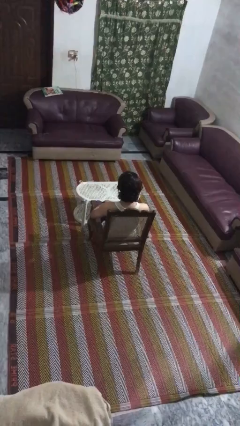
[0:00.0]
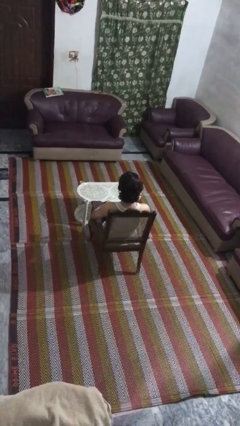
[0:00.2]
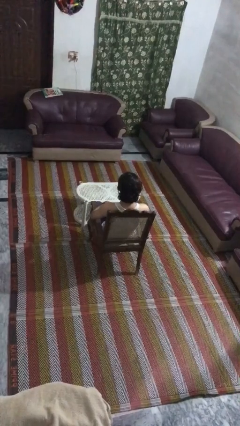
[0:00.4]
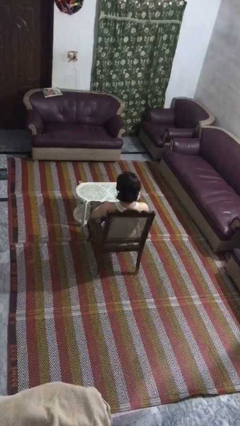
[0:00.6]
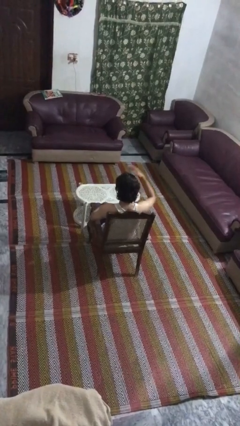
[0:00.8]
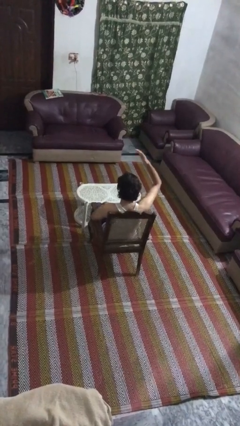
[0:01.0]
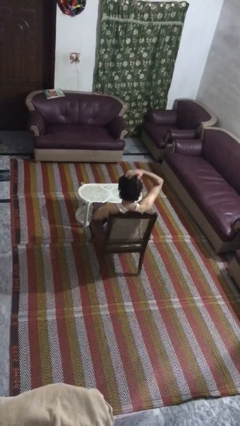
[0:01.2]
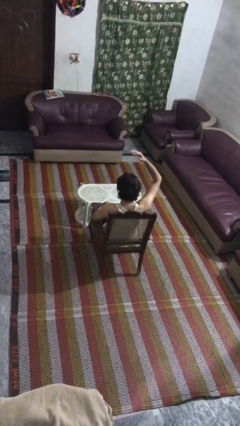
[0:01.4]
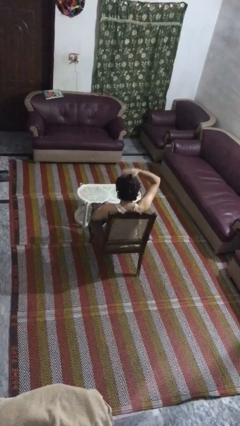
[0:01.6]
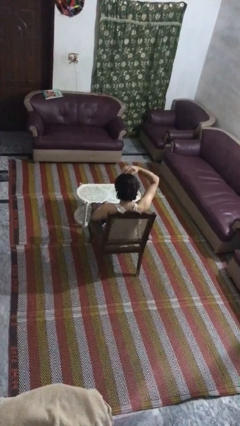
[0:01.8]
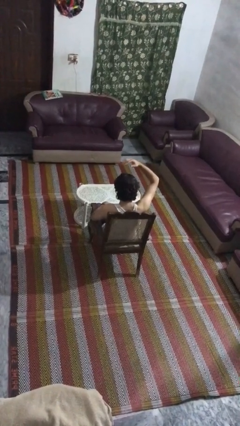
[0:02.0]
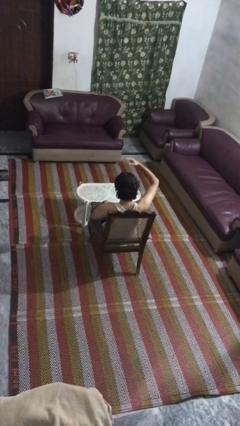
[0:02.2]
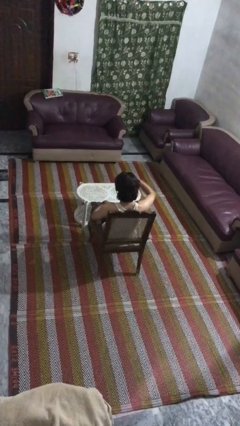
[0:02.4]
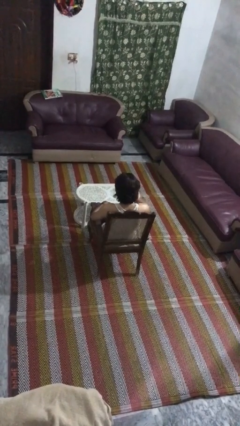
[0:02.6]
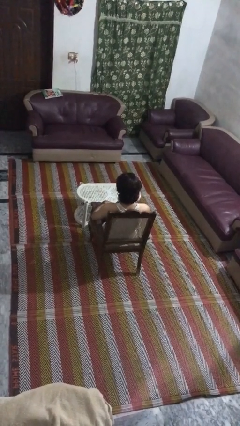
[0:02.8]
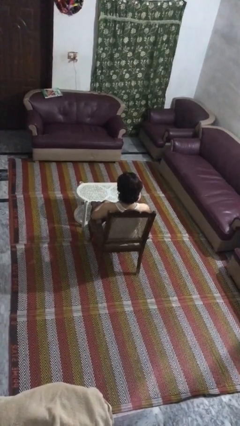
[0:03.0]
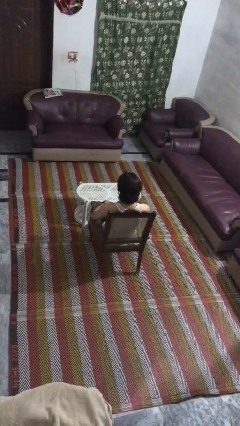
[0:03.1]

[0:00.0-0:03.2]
person pats head

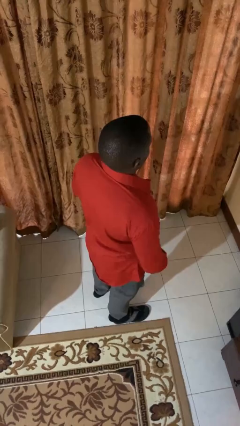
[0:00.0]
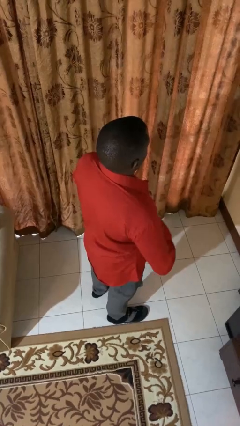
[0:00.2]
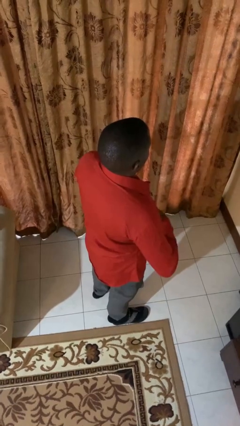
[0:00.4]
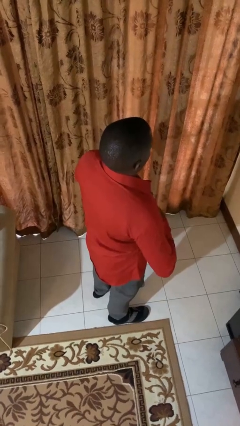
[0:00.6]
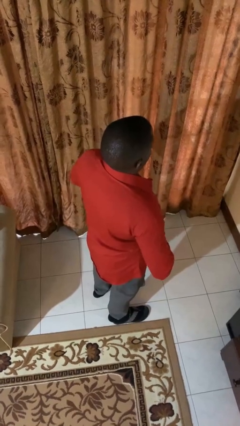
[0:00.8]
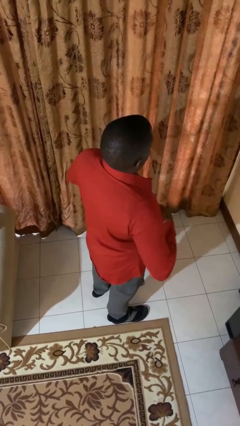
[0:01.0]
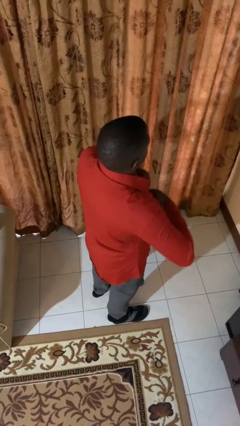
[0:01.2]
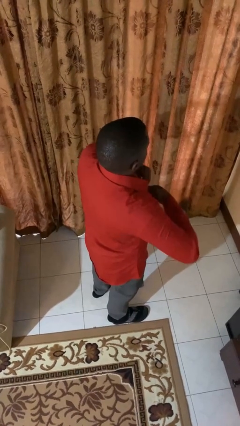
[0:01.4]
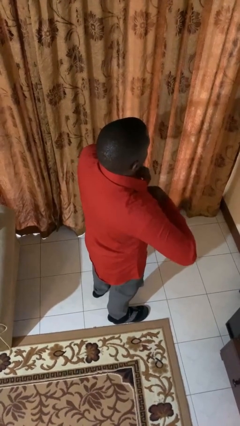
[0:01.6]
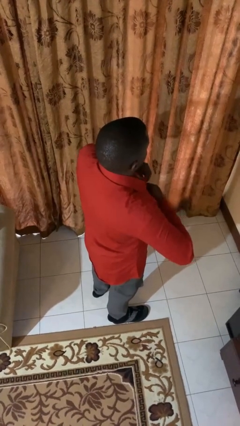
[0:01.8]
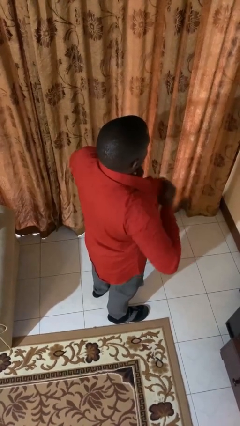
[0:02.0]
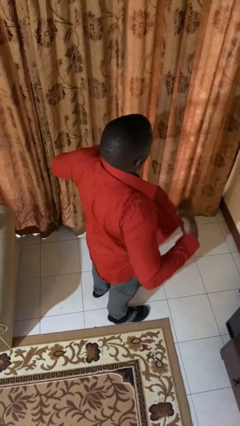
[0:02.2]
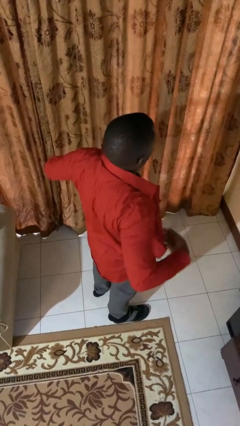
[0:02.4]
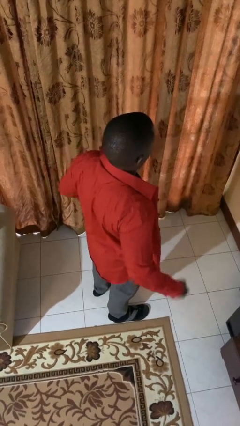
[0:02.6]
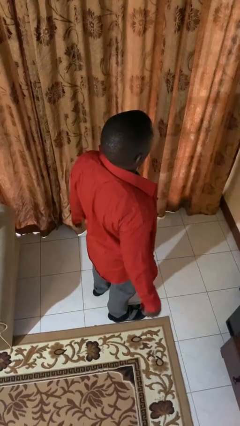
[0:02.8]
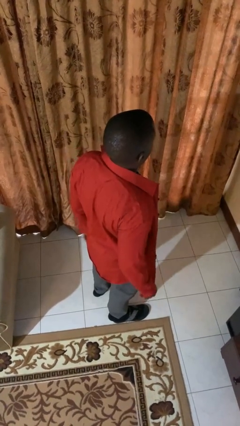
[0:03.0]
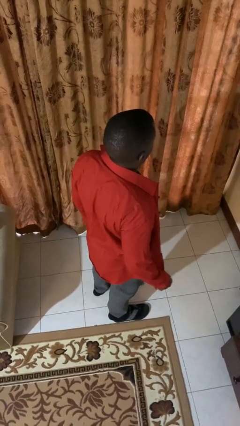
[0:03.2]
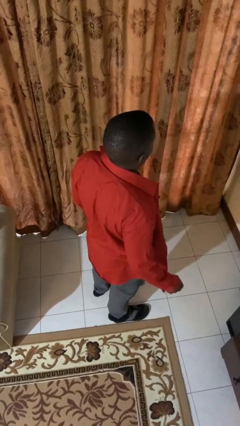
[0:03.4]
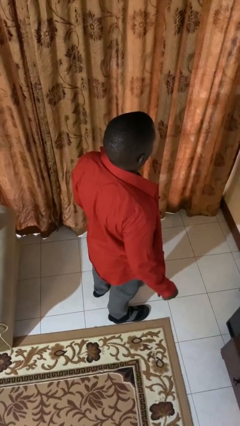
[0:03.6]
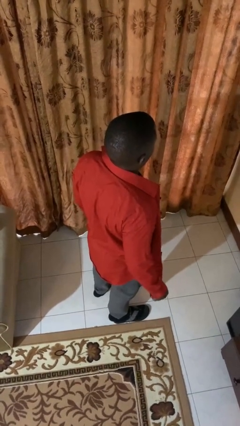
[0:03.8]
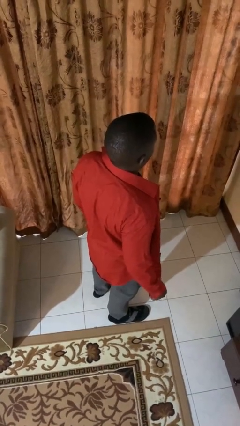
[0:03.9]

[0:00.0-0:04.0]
person unbuttons shirt

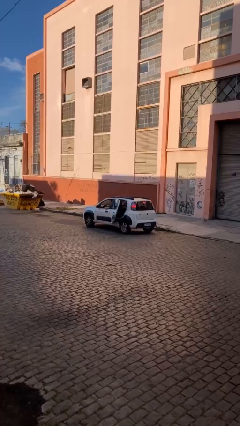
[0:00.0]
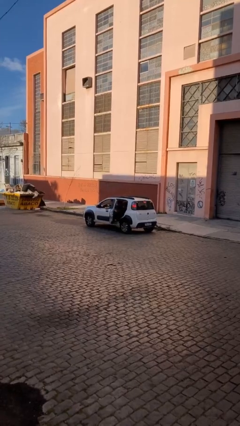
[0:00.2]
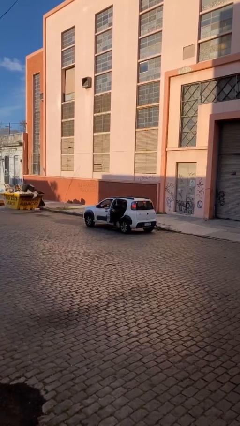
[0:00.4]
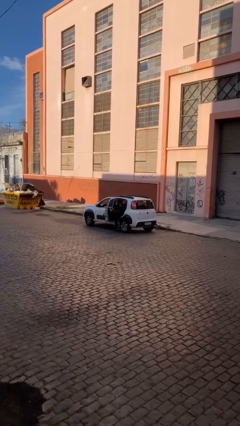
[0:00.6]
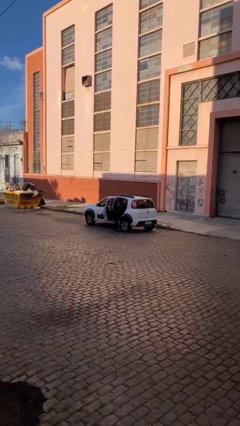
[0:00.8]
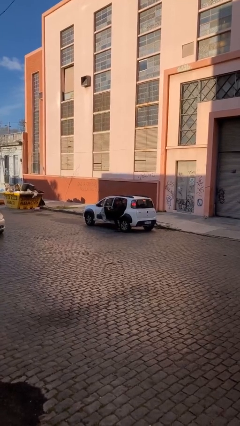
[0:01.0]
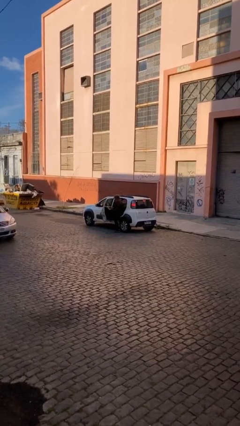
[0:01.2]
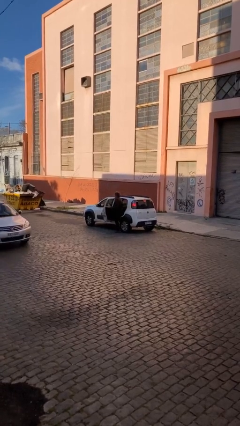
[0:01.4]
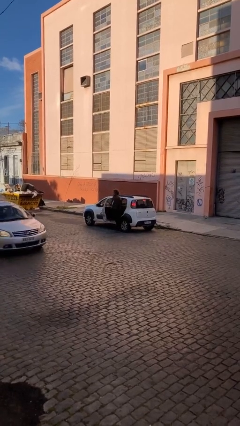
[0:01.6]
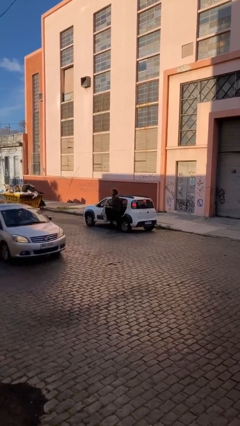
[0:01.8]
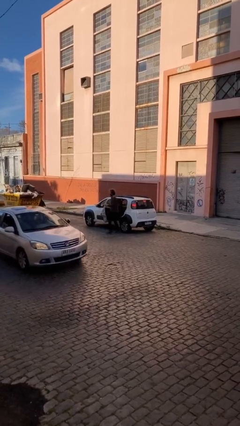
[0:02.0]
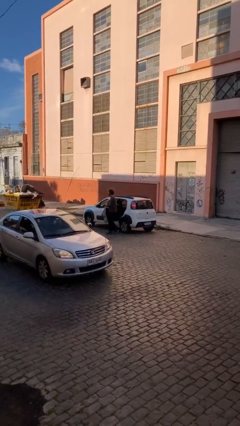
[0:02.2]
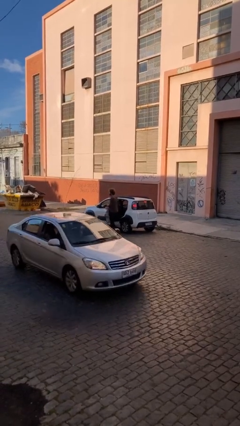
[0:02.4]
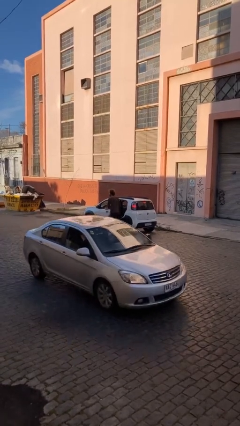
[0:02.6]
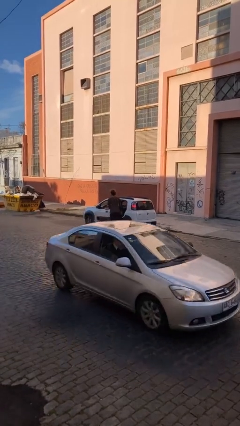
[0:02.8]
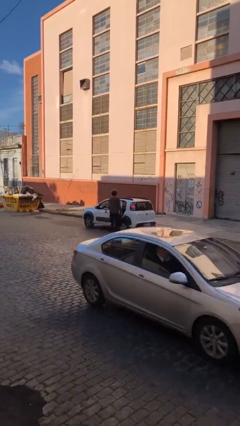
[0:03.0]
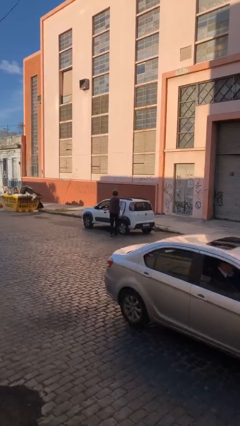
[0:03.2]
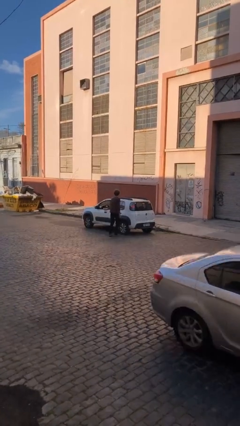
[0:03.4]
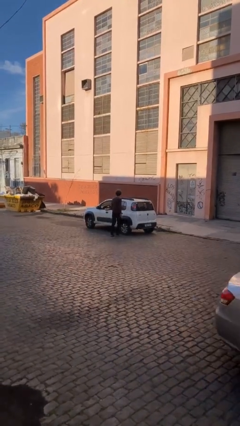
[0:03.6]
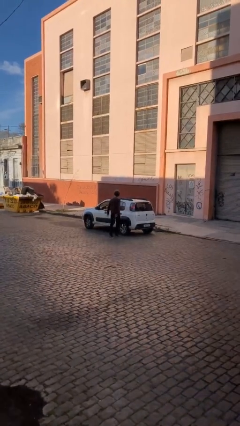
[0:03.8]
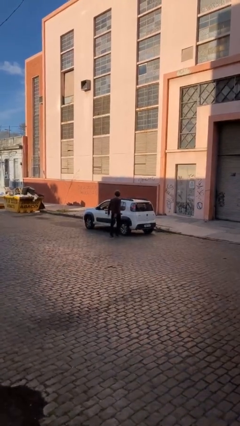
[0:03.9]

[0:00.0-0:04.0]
car drops off person

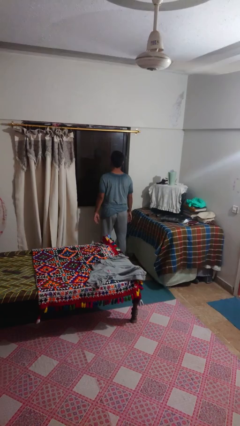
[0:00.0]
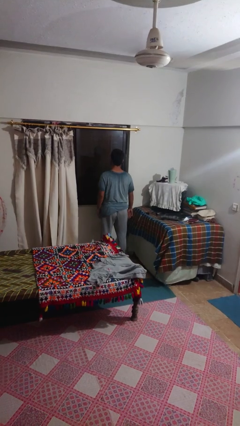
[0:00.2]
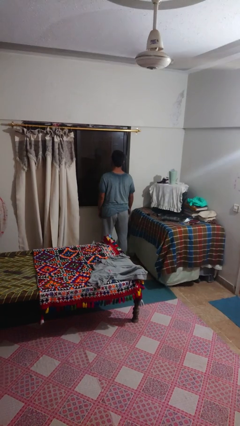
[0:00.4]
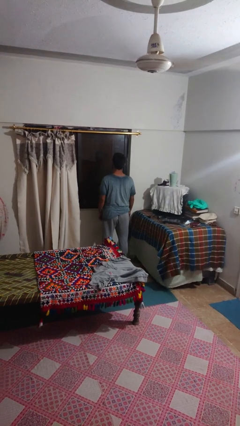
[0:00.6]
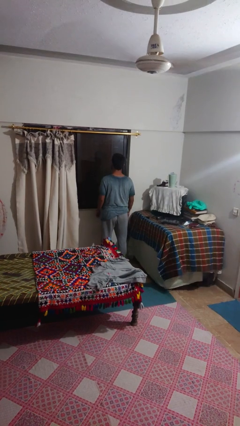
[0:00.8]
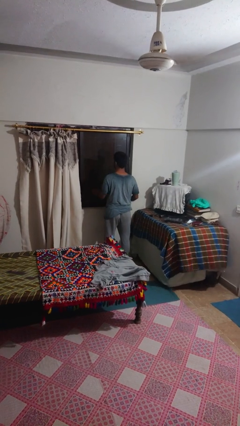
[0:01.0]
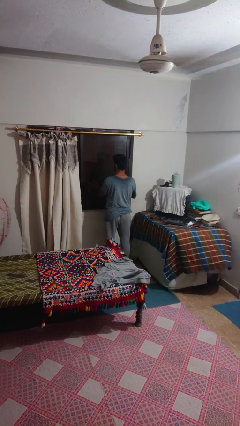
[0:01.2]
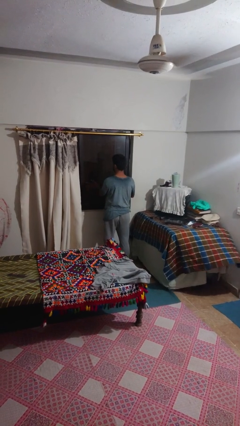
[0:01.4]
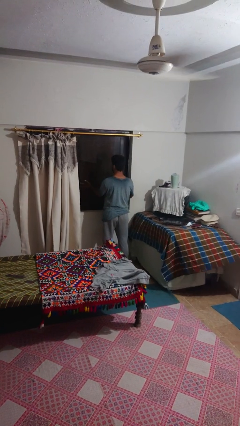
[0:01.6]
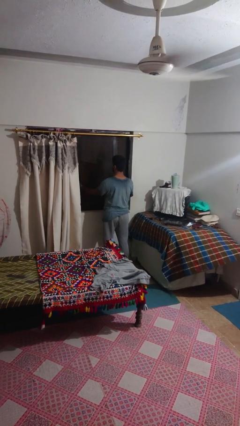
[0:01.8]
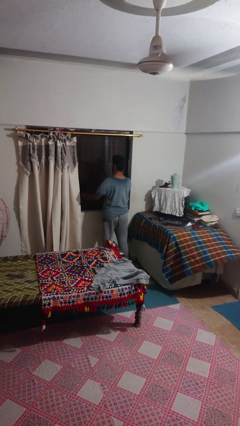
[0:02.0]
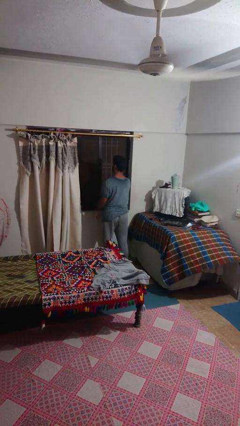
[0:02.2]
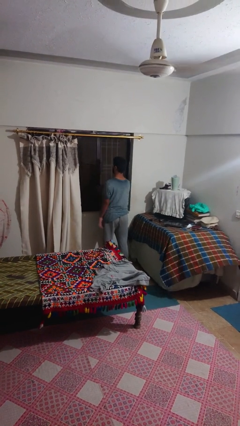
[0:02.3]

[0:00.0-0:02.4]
person opens home window

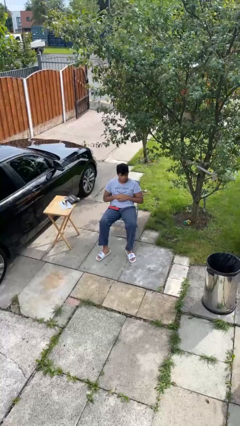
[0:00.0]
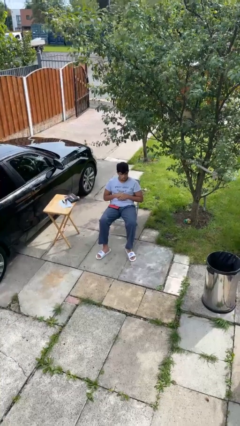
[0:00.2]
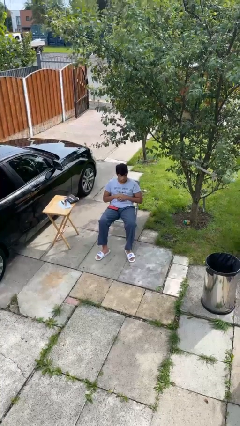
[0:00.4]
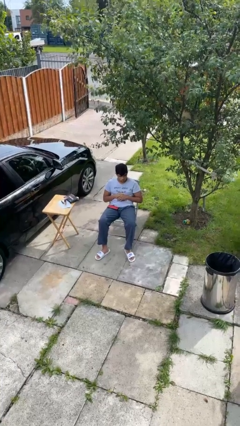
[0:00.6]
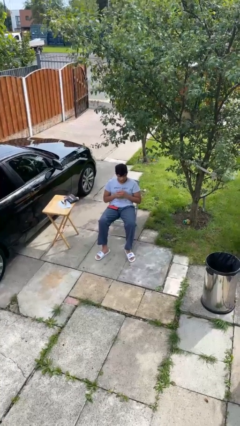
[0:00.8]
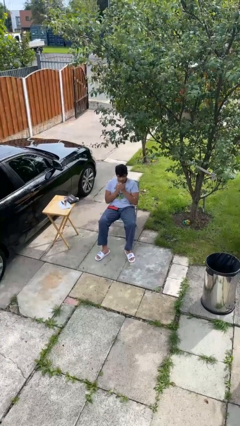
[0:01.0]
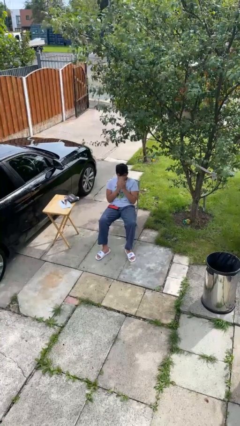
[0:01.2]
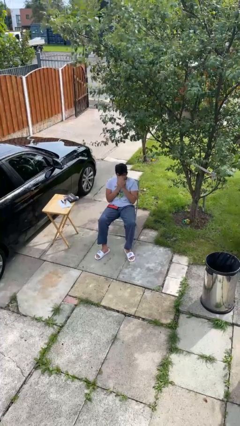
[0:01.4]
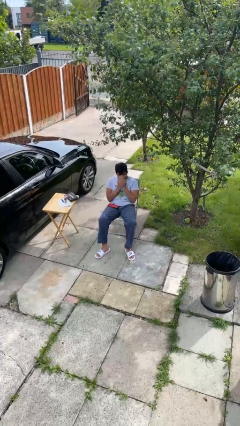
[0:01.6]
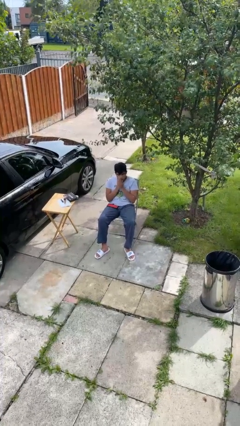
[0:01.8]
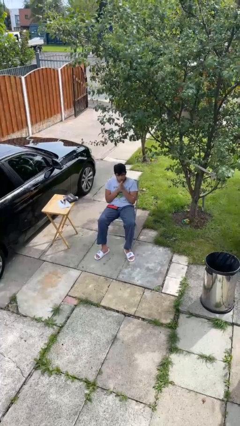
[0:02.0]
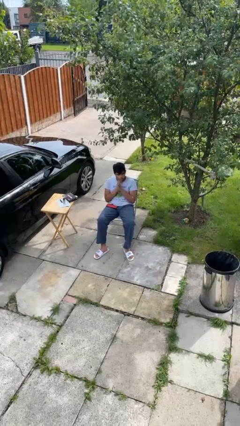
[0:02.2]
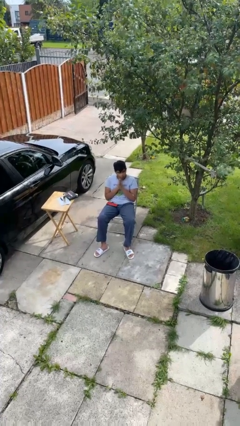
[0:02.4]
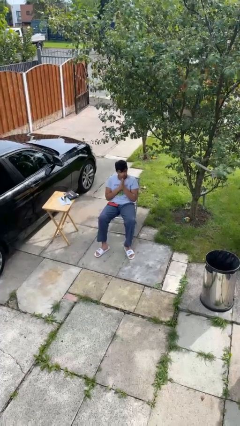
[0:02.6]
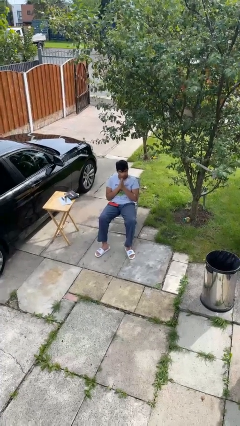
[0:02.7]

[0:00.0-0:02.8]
person blows into hands

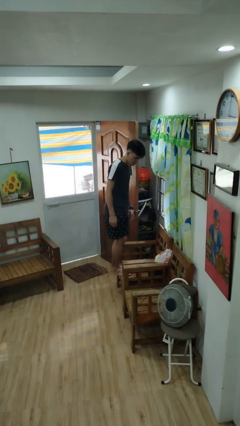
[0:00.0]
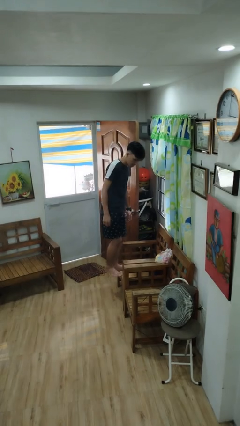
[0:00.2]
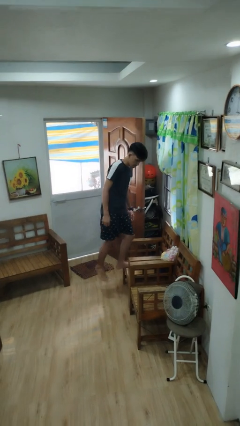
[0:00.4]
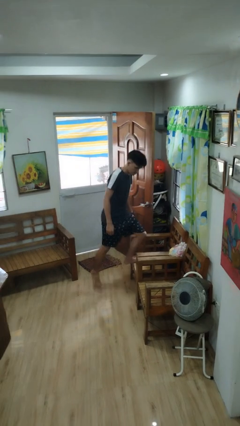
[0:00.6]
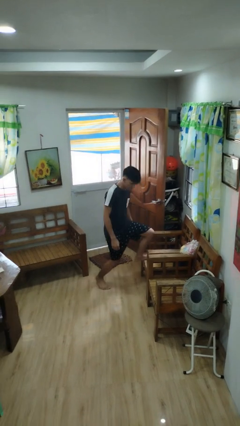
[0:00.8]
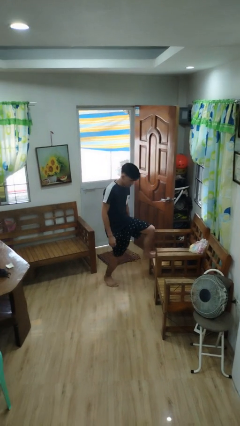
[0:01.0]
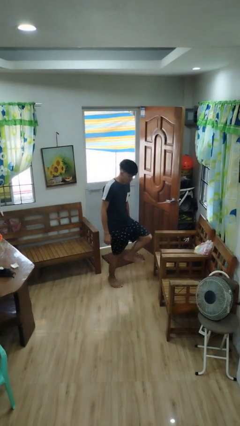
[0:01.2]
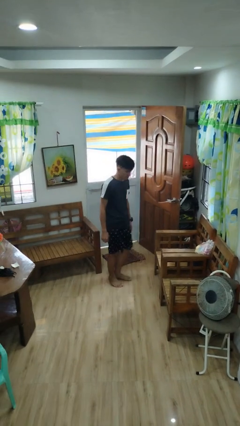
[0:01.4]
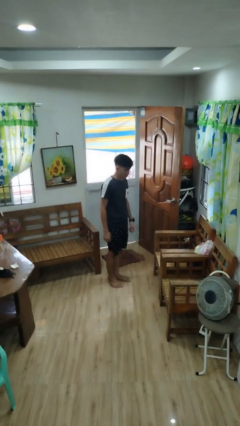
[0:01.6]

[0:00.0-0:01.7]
person climbs off chair
